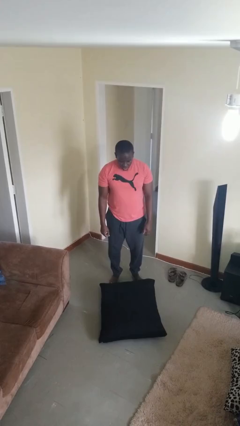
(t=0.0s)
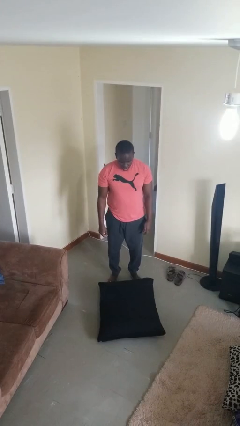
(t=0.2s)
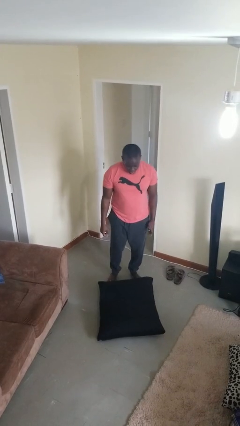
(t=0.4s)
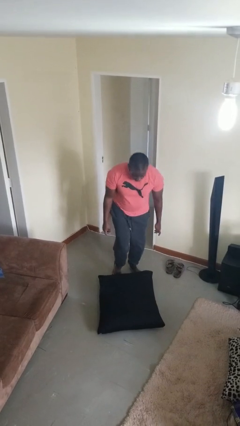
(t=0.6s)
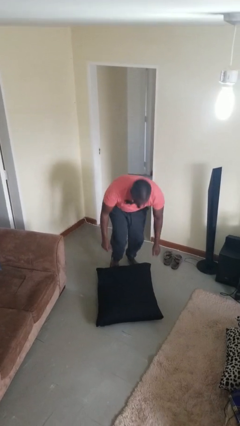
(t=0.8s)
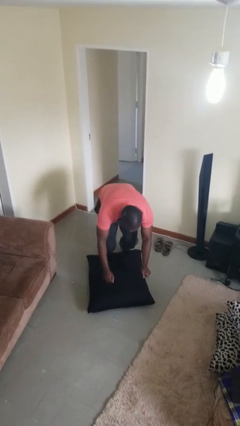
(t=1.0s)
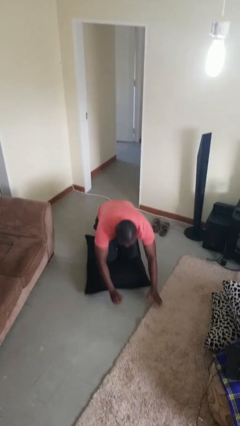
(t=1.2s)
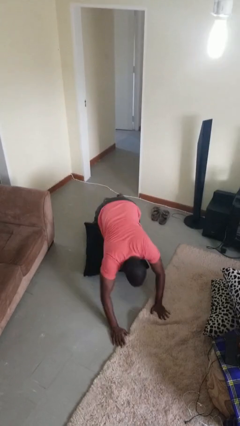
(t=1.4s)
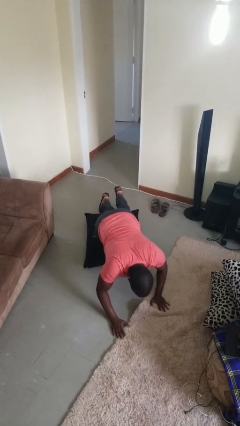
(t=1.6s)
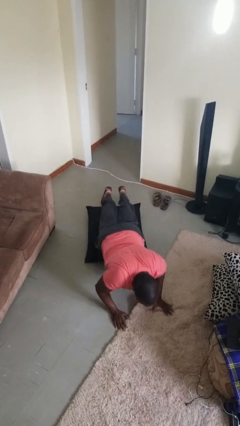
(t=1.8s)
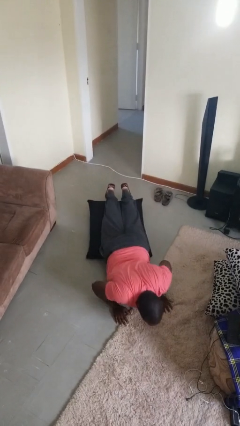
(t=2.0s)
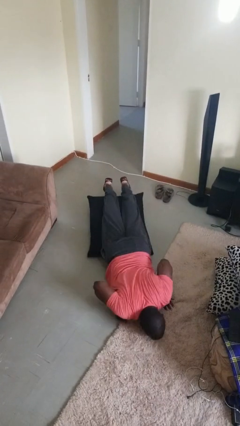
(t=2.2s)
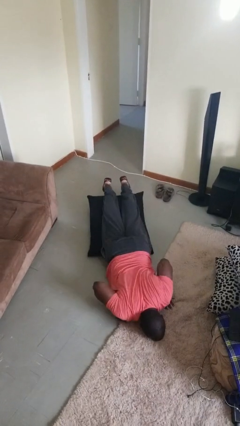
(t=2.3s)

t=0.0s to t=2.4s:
person trips on object on floor

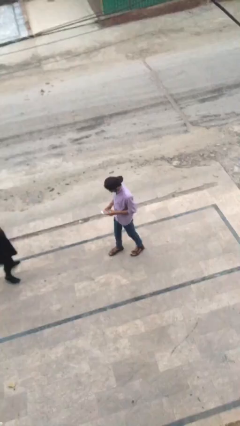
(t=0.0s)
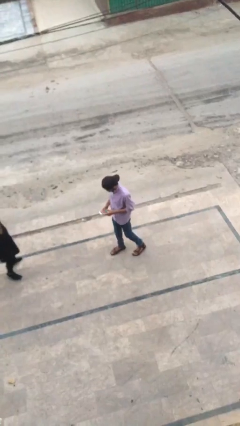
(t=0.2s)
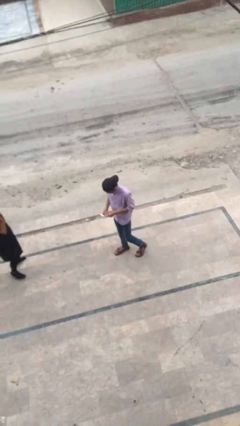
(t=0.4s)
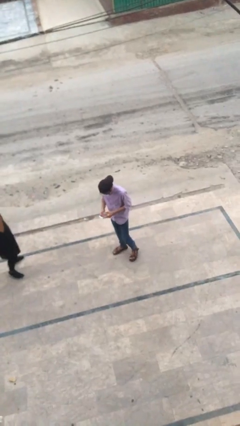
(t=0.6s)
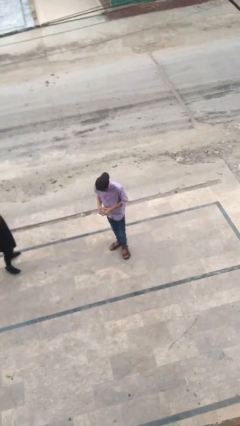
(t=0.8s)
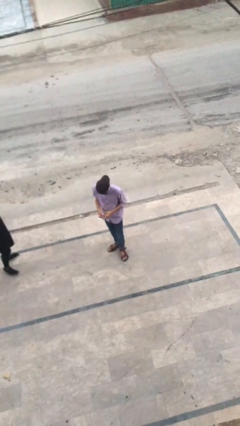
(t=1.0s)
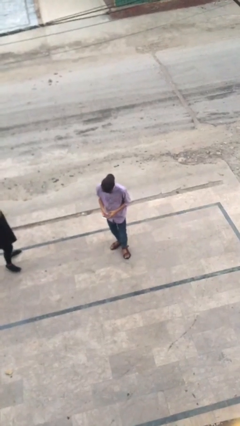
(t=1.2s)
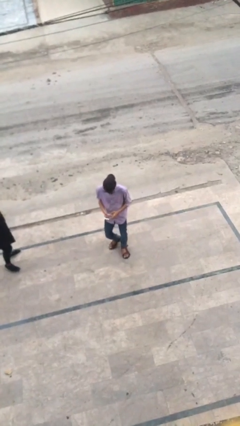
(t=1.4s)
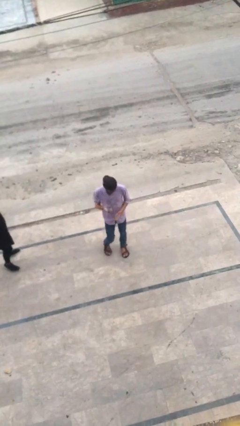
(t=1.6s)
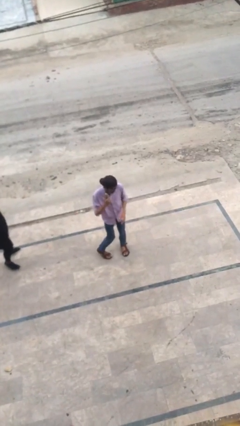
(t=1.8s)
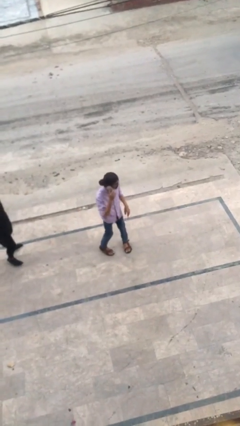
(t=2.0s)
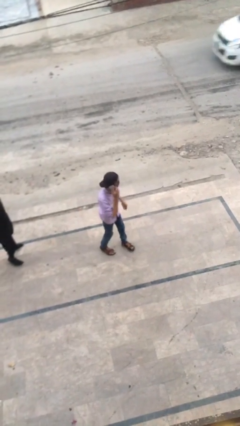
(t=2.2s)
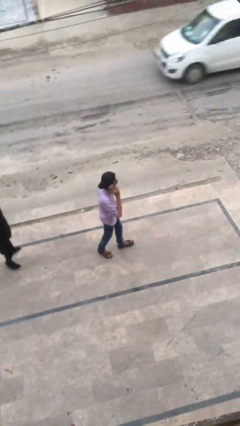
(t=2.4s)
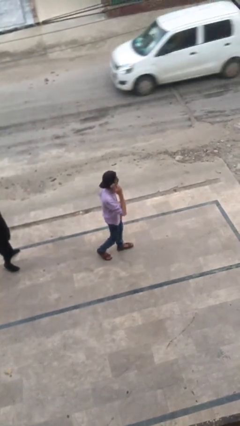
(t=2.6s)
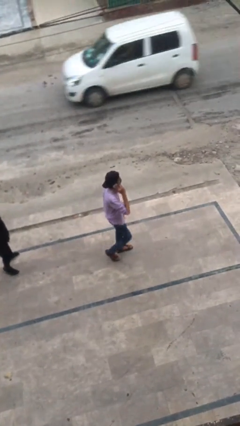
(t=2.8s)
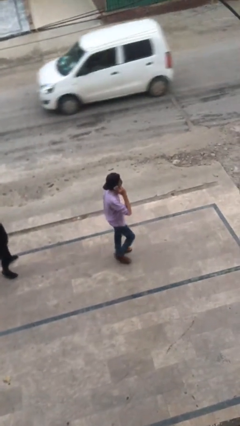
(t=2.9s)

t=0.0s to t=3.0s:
person talks on phone

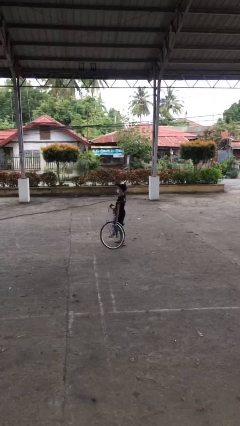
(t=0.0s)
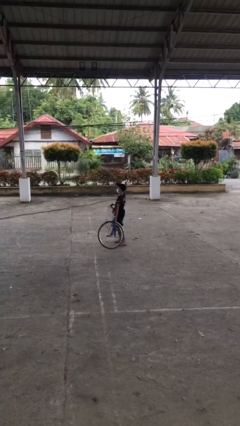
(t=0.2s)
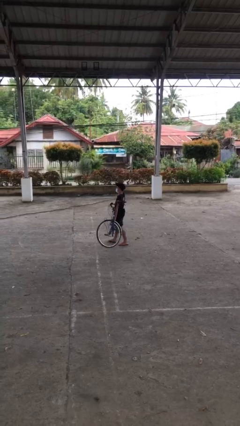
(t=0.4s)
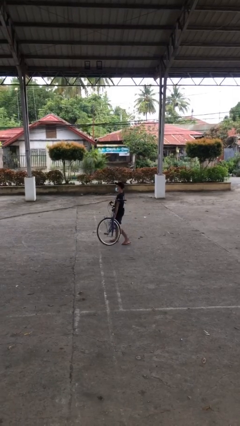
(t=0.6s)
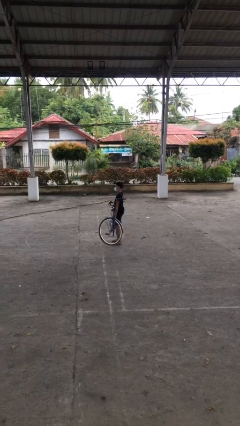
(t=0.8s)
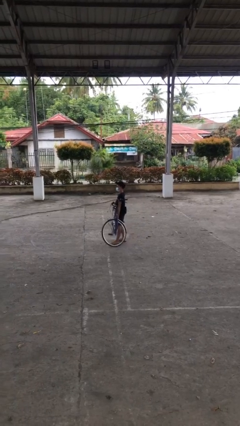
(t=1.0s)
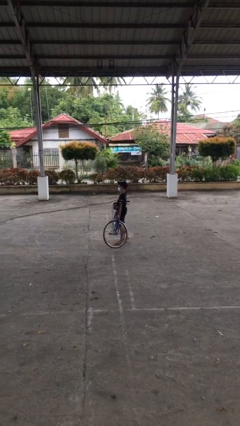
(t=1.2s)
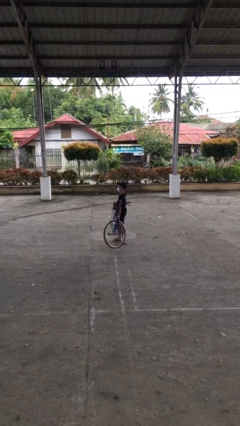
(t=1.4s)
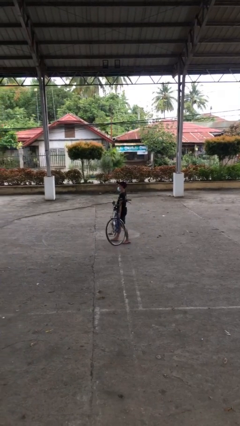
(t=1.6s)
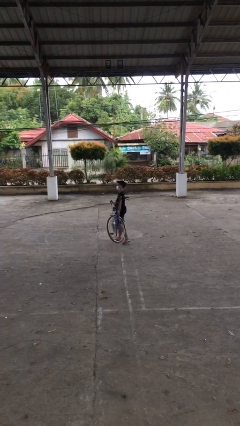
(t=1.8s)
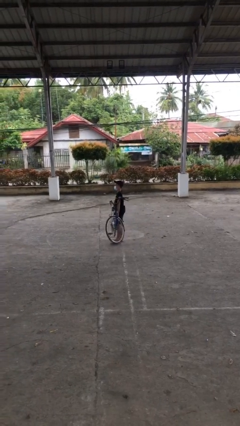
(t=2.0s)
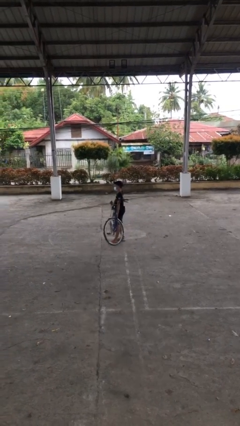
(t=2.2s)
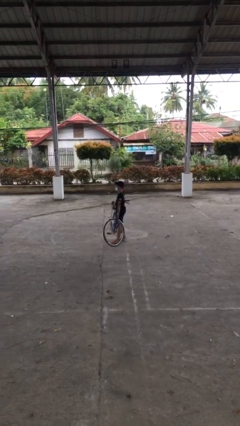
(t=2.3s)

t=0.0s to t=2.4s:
person carries heavy object

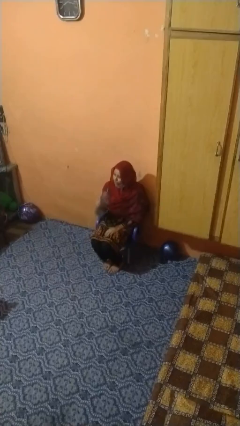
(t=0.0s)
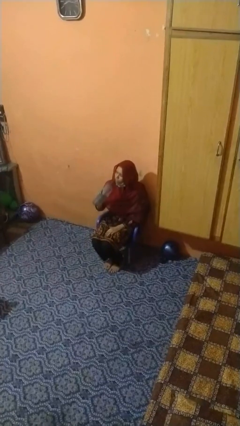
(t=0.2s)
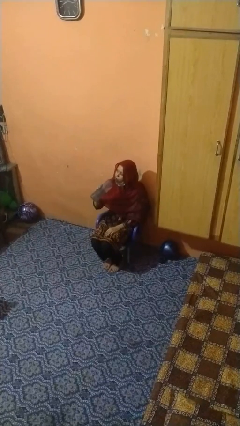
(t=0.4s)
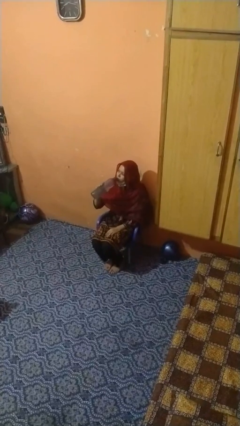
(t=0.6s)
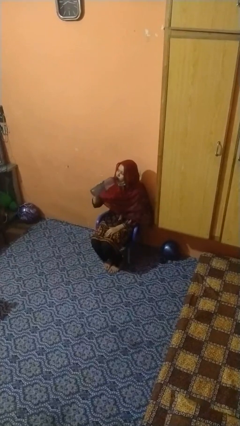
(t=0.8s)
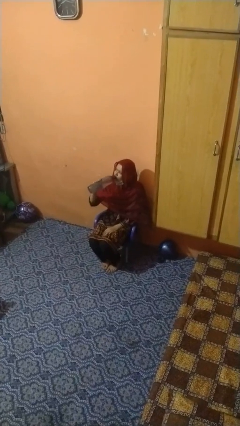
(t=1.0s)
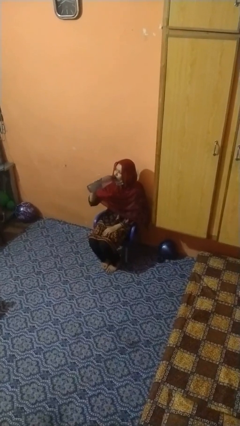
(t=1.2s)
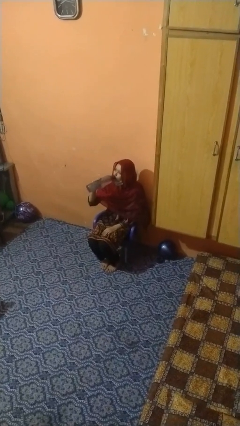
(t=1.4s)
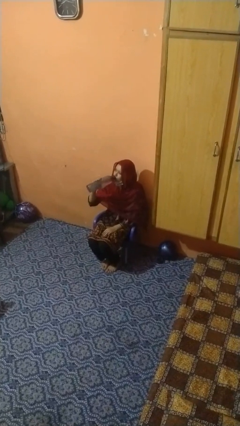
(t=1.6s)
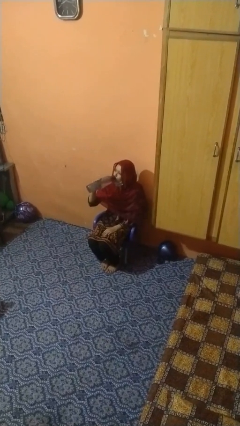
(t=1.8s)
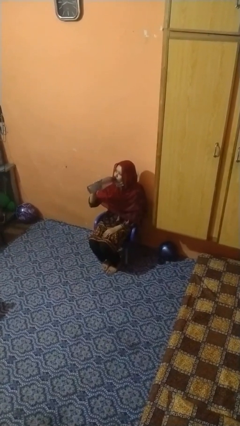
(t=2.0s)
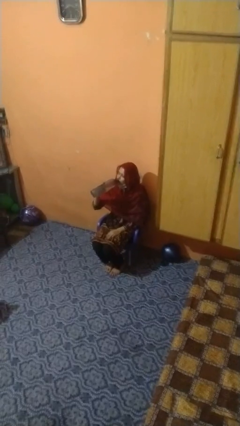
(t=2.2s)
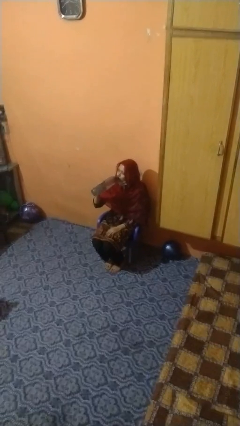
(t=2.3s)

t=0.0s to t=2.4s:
person drinks from bottle

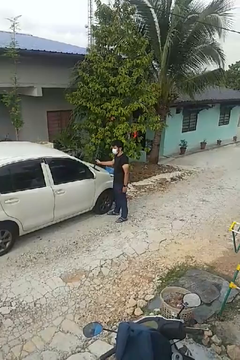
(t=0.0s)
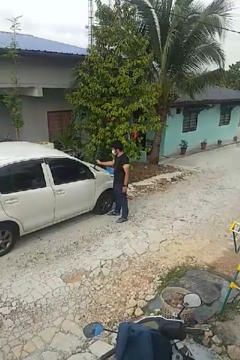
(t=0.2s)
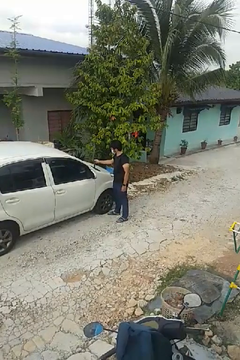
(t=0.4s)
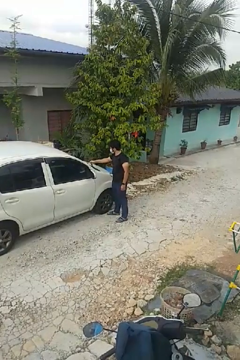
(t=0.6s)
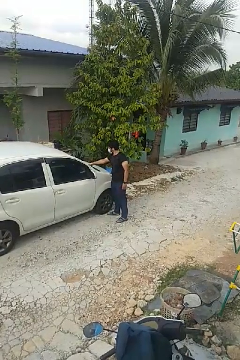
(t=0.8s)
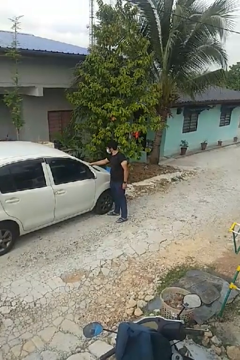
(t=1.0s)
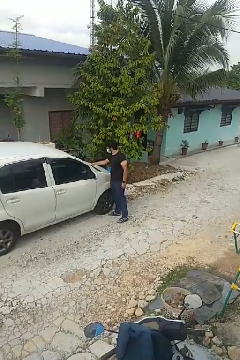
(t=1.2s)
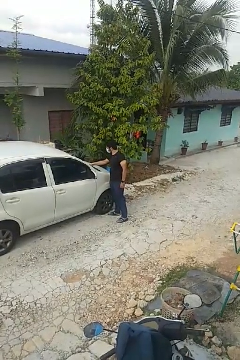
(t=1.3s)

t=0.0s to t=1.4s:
person flips down car wipers

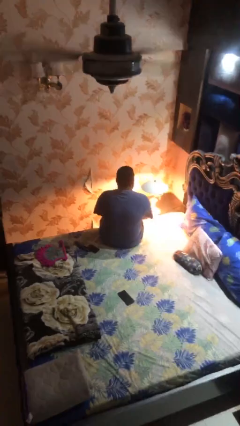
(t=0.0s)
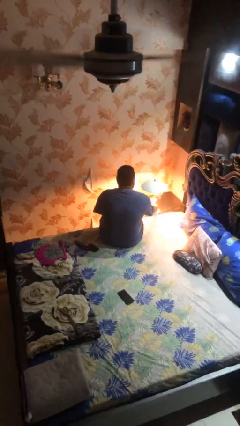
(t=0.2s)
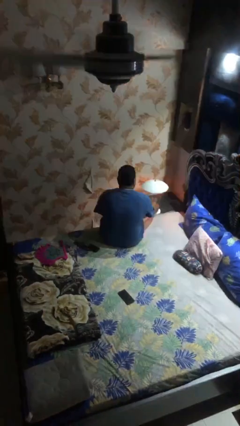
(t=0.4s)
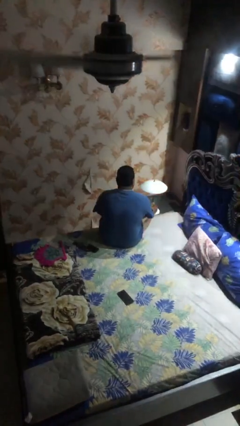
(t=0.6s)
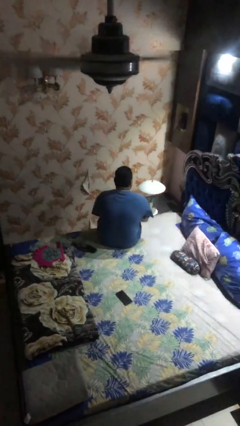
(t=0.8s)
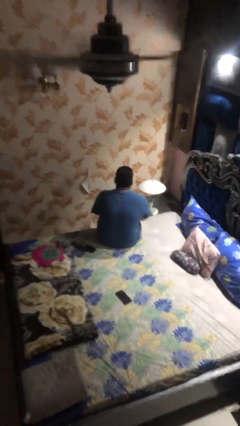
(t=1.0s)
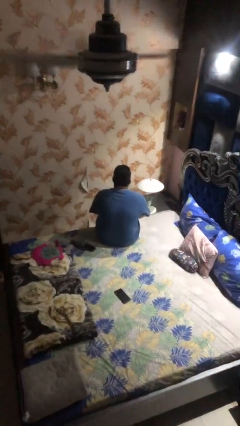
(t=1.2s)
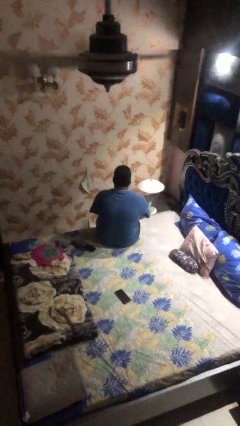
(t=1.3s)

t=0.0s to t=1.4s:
person turns off lamp

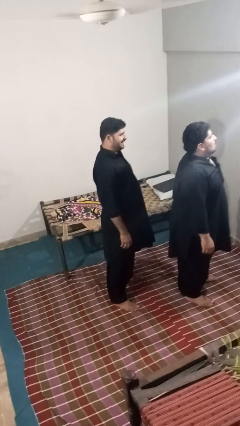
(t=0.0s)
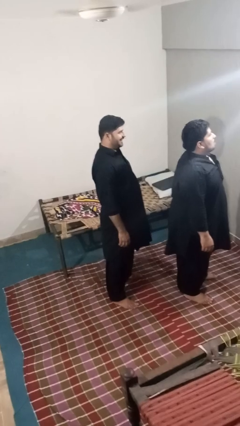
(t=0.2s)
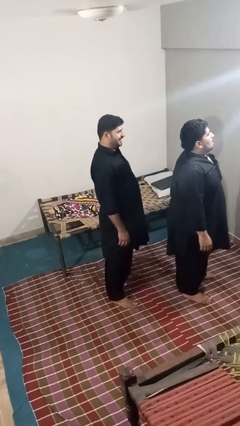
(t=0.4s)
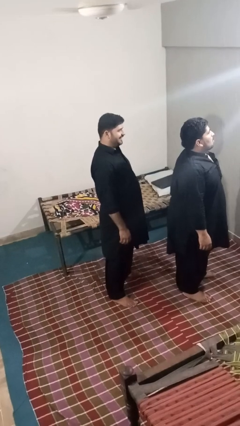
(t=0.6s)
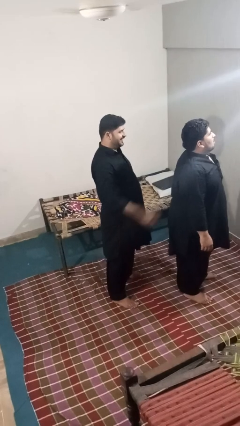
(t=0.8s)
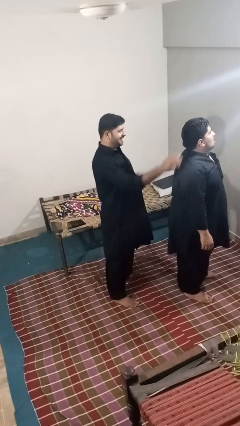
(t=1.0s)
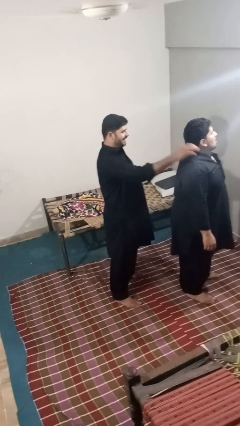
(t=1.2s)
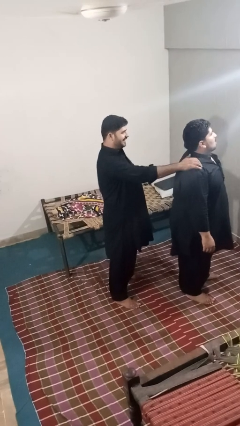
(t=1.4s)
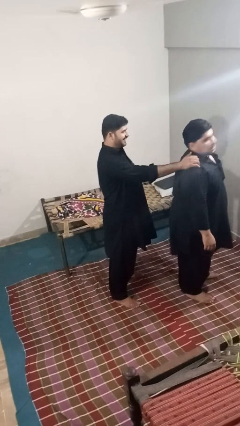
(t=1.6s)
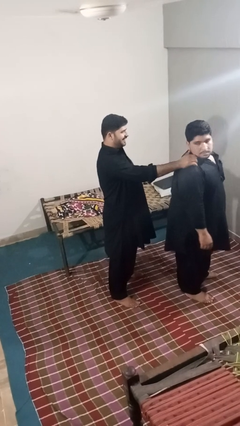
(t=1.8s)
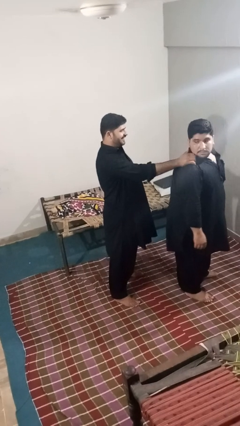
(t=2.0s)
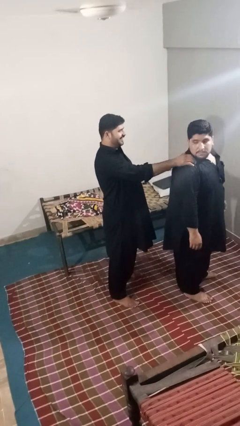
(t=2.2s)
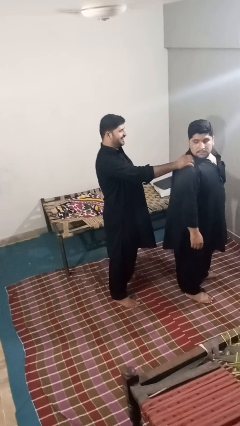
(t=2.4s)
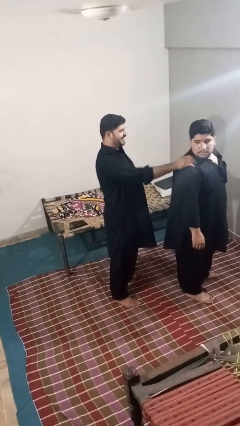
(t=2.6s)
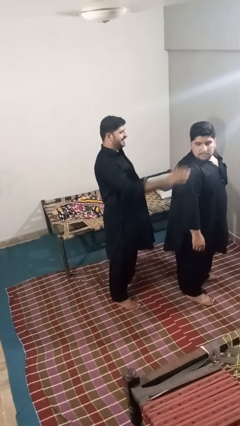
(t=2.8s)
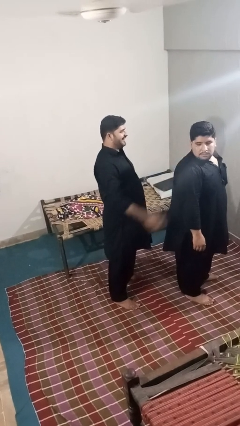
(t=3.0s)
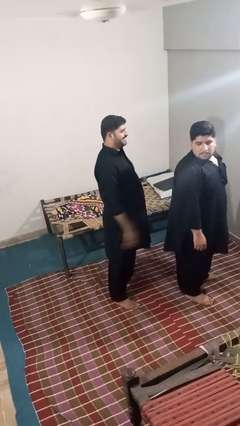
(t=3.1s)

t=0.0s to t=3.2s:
person touches back of person

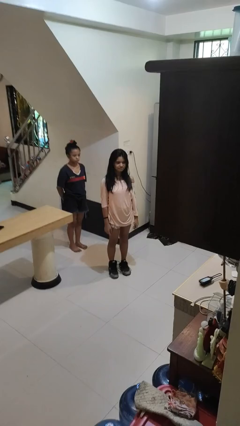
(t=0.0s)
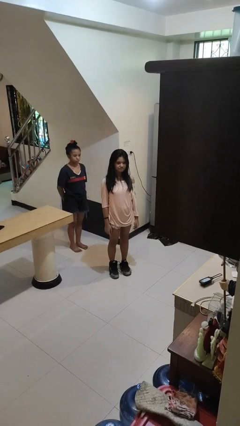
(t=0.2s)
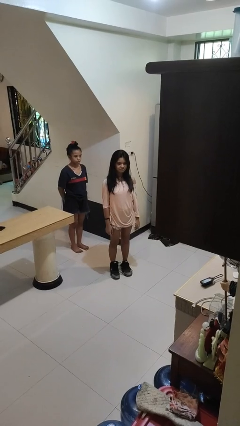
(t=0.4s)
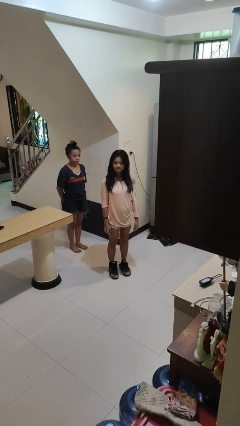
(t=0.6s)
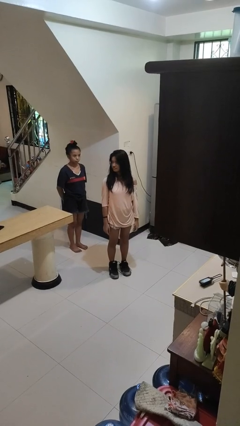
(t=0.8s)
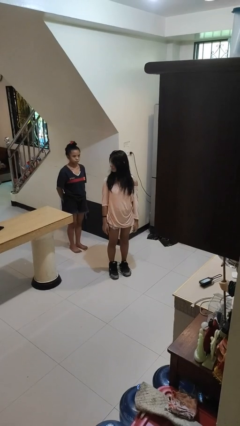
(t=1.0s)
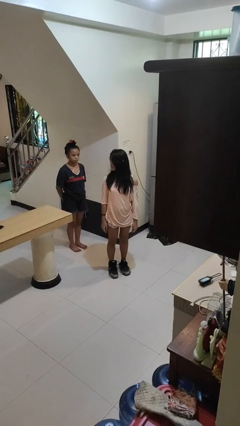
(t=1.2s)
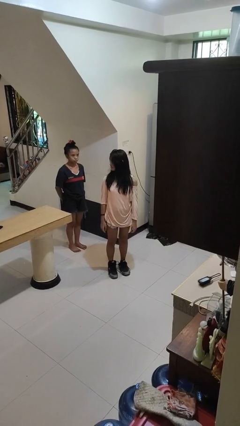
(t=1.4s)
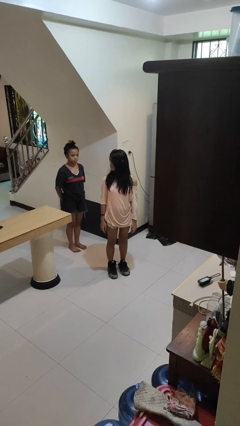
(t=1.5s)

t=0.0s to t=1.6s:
person looks over shoulder
